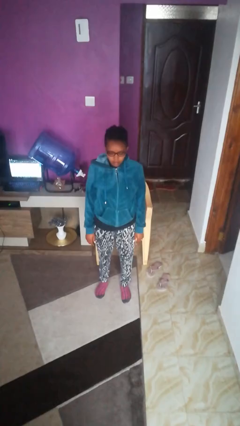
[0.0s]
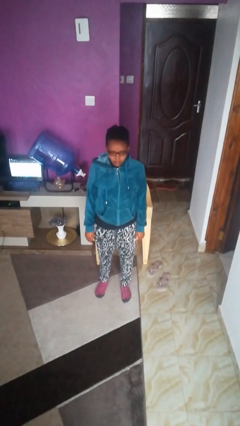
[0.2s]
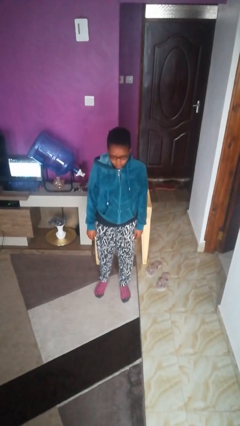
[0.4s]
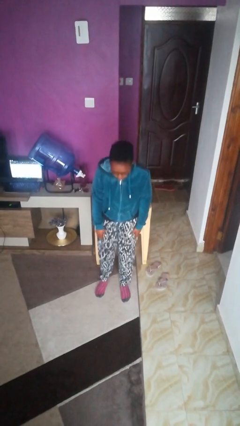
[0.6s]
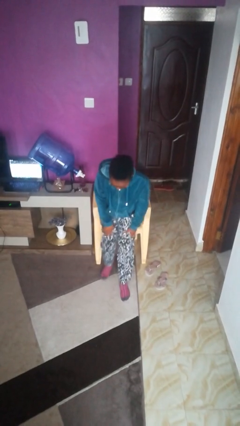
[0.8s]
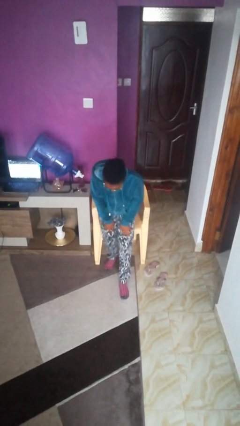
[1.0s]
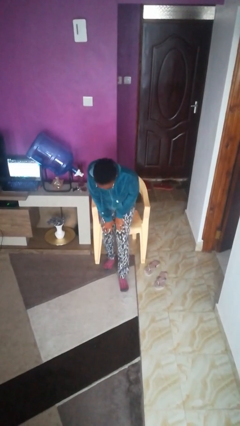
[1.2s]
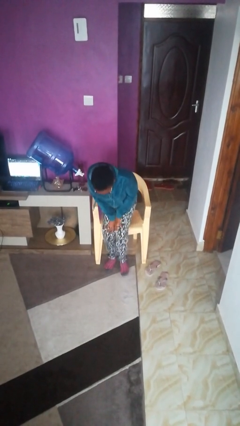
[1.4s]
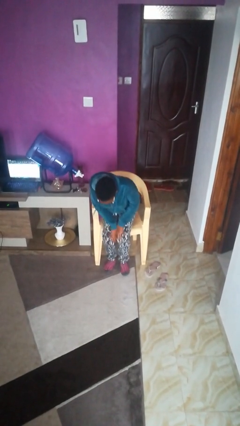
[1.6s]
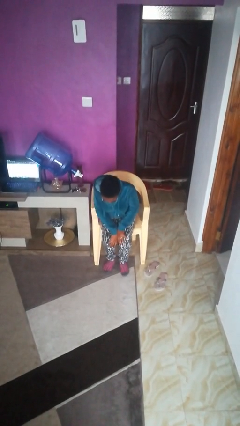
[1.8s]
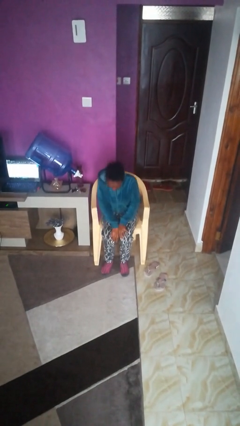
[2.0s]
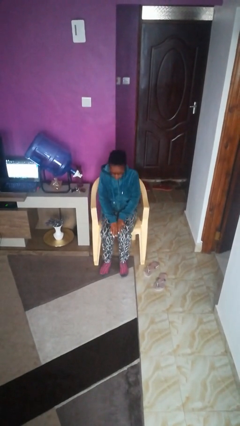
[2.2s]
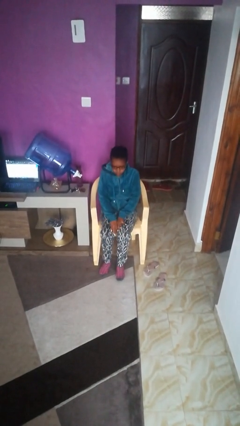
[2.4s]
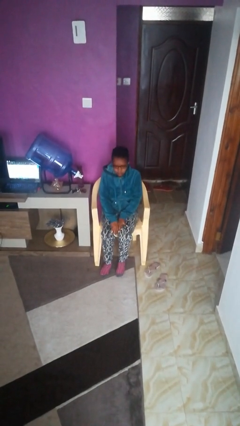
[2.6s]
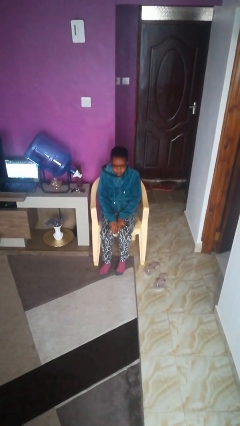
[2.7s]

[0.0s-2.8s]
person sits down

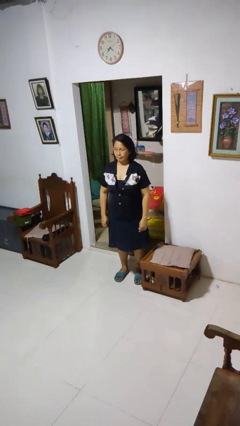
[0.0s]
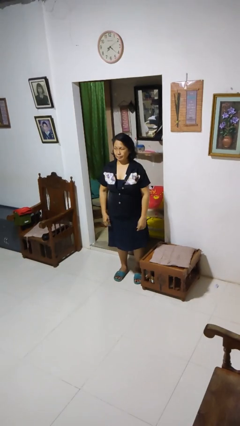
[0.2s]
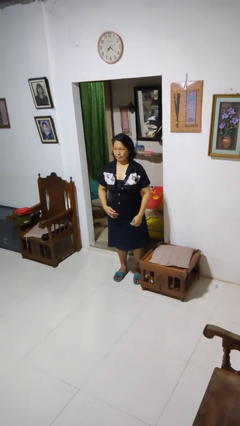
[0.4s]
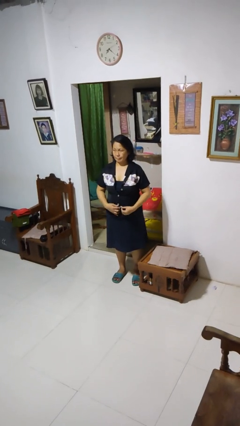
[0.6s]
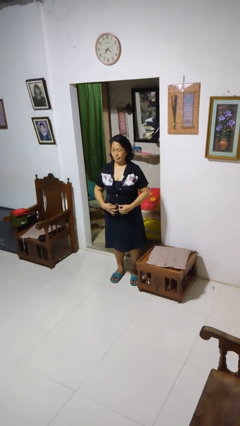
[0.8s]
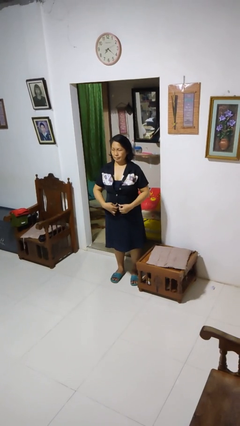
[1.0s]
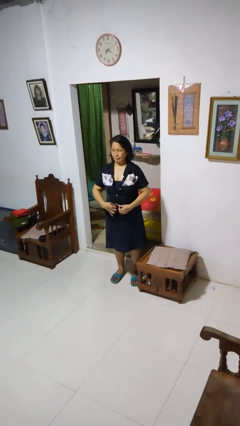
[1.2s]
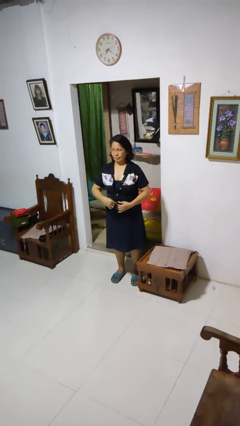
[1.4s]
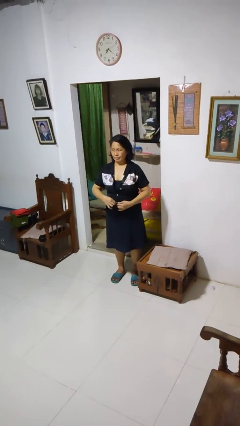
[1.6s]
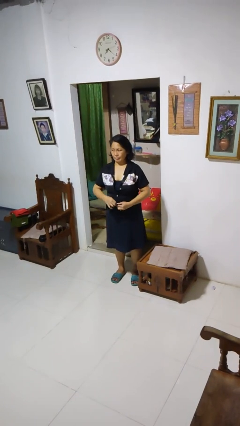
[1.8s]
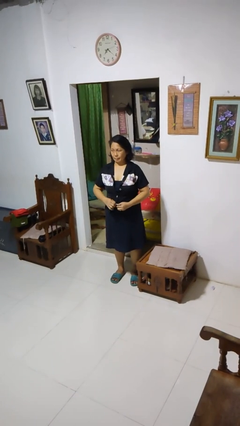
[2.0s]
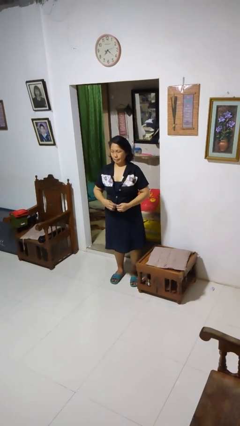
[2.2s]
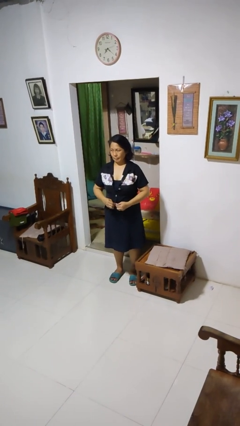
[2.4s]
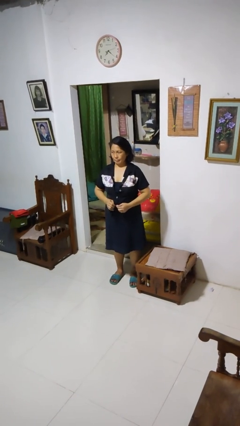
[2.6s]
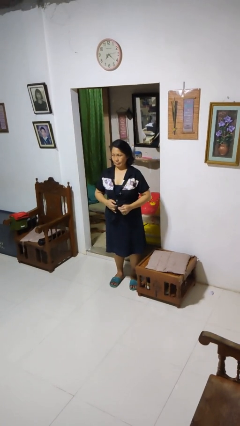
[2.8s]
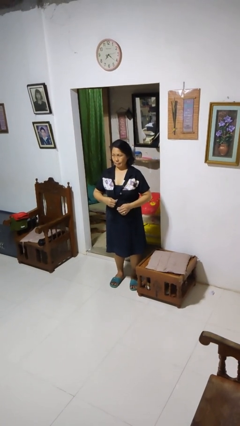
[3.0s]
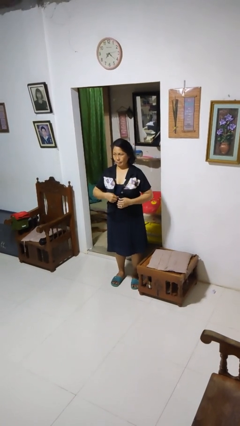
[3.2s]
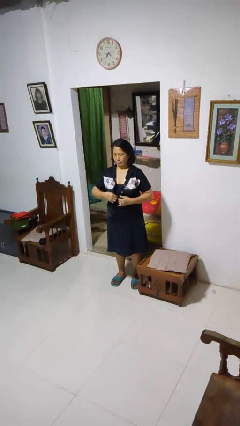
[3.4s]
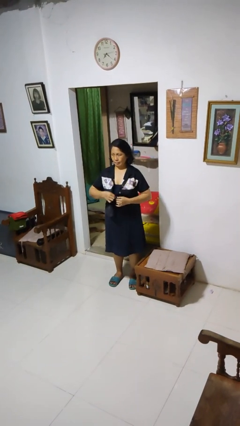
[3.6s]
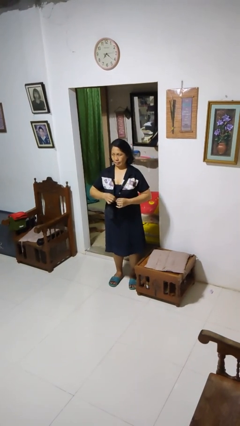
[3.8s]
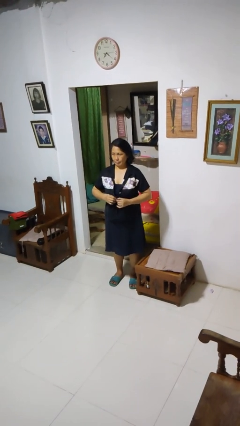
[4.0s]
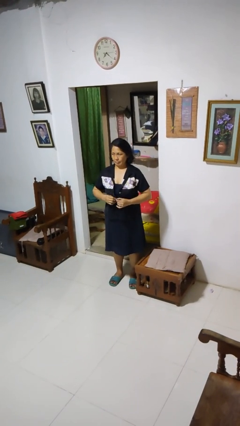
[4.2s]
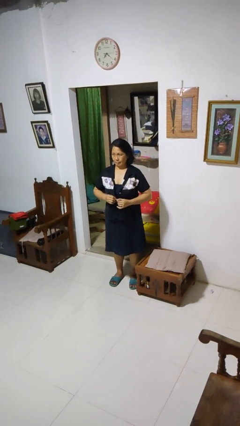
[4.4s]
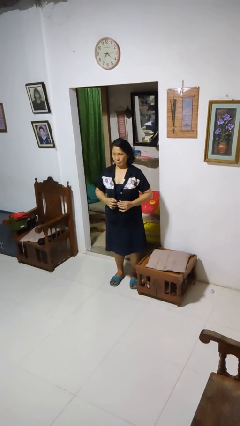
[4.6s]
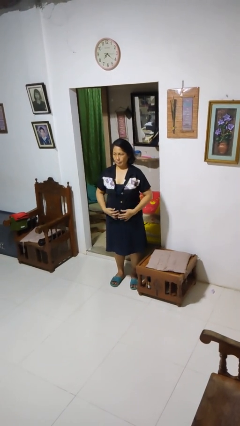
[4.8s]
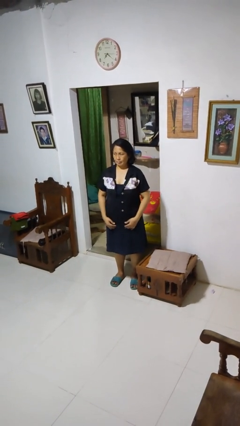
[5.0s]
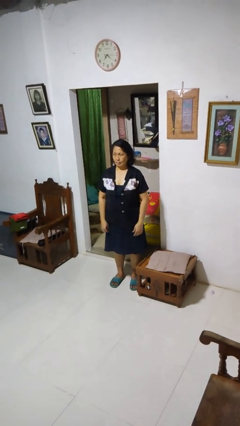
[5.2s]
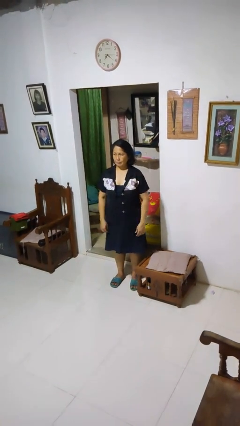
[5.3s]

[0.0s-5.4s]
person unbuttons shirt

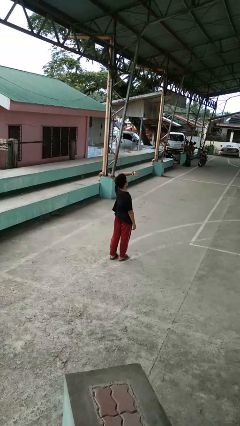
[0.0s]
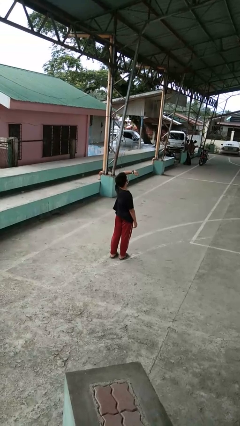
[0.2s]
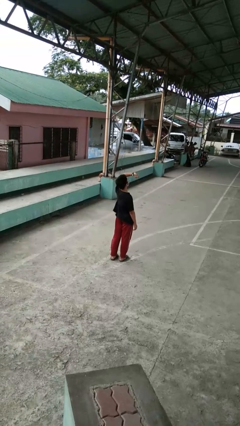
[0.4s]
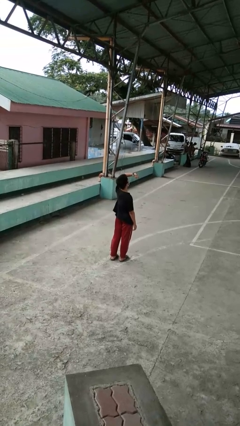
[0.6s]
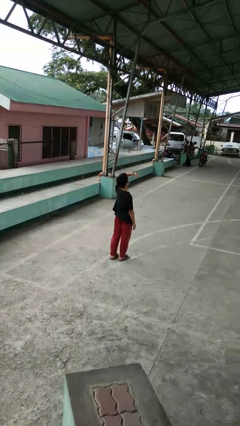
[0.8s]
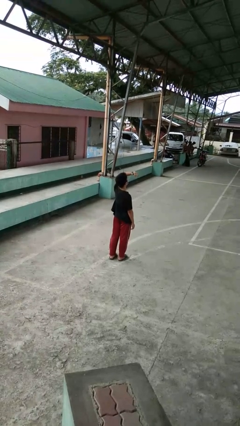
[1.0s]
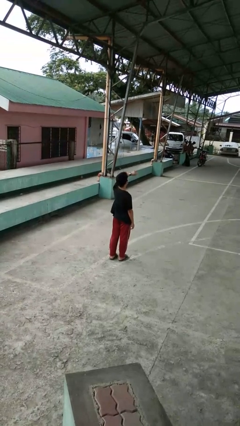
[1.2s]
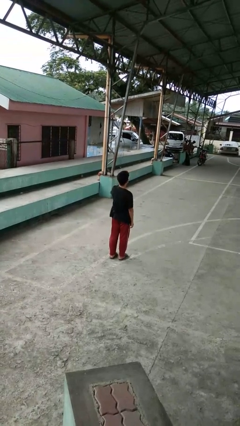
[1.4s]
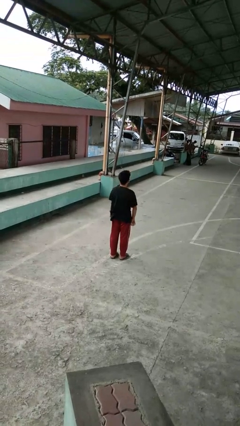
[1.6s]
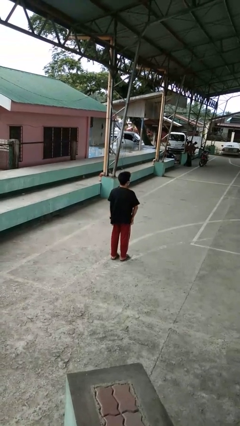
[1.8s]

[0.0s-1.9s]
person looks at wristwatch

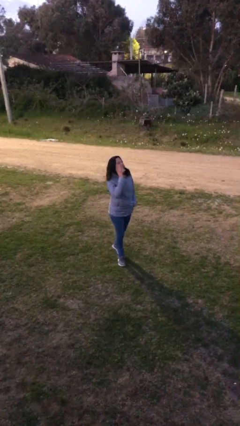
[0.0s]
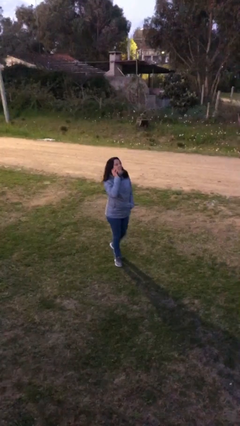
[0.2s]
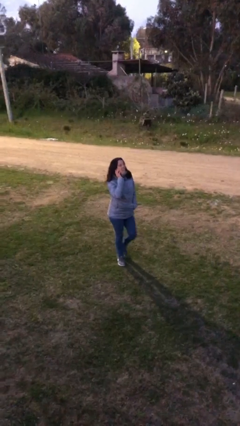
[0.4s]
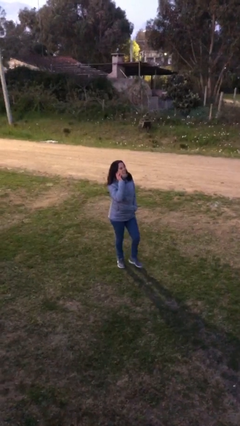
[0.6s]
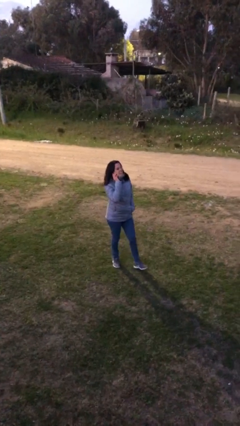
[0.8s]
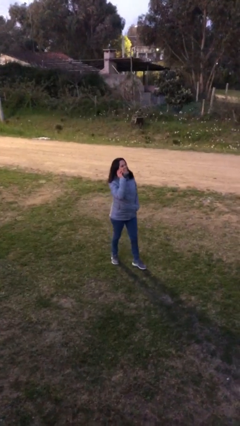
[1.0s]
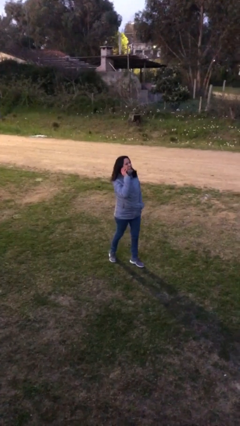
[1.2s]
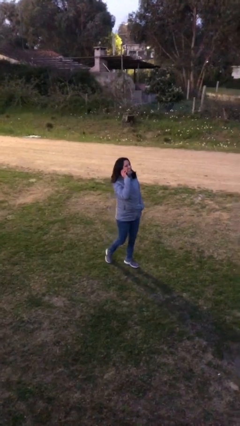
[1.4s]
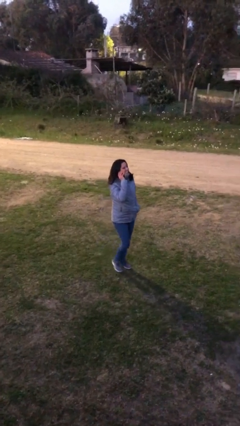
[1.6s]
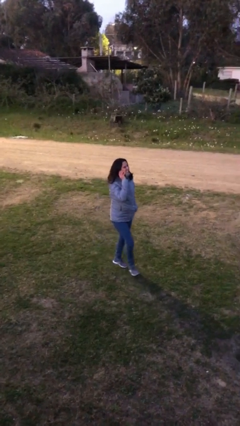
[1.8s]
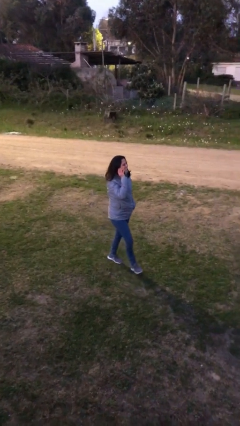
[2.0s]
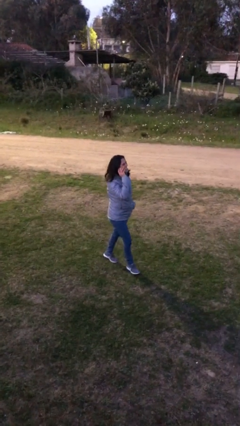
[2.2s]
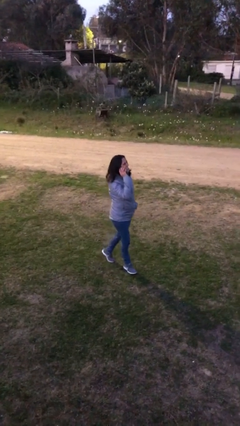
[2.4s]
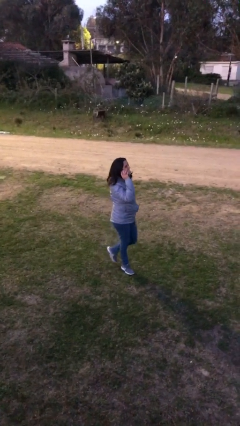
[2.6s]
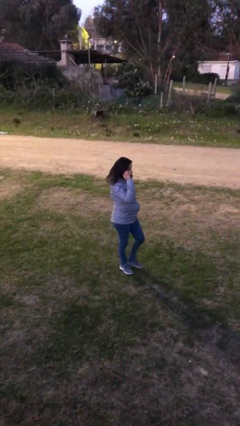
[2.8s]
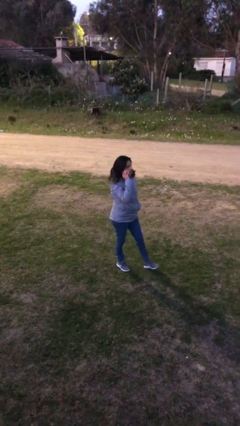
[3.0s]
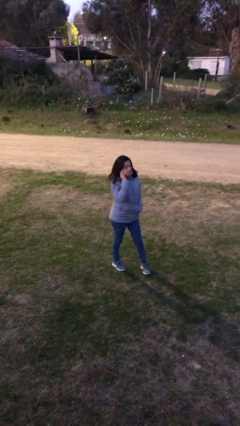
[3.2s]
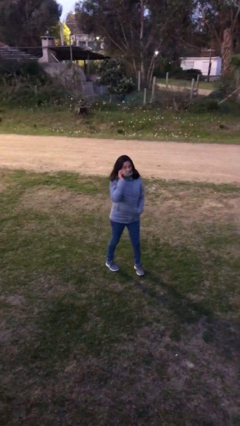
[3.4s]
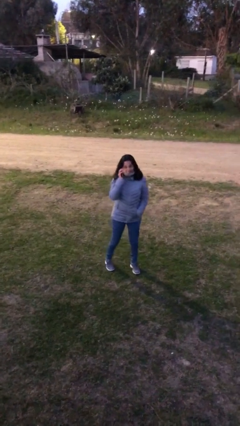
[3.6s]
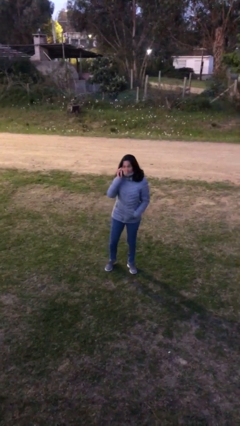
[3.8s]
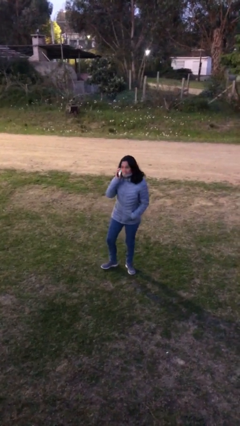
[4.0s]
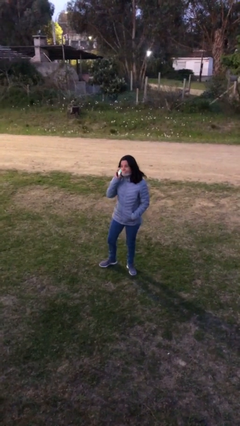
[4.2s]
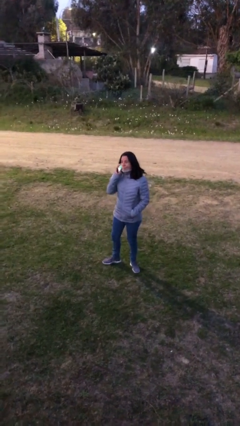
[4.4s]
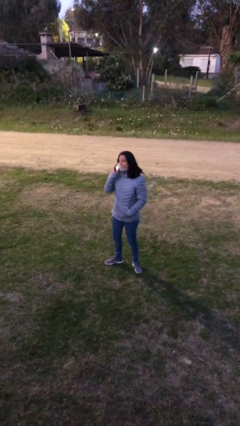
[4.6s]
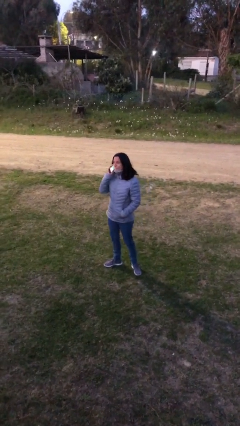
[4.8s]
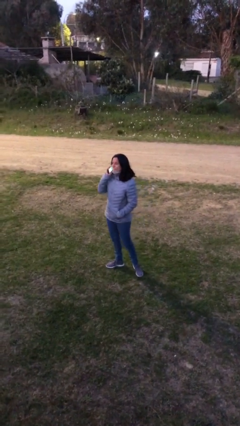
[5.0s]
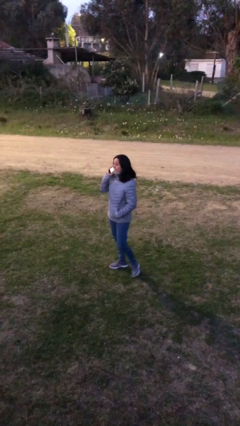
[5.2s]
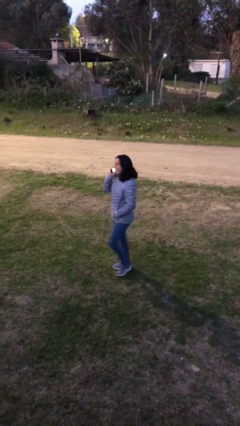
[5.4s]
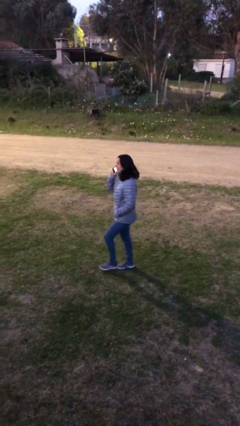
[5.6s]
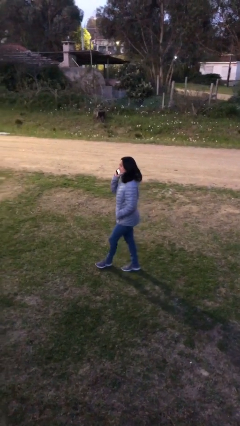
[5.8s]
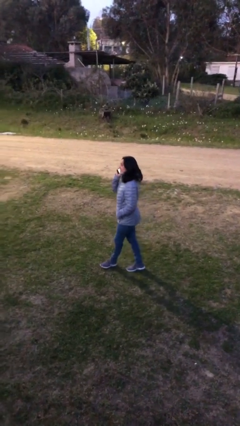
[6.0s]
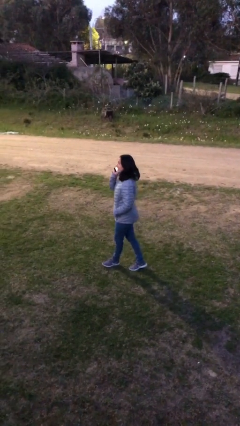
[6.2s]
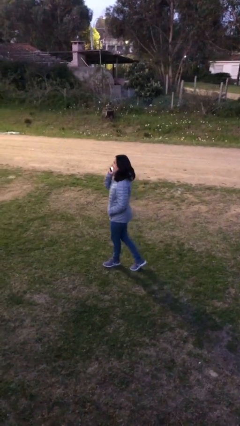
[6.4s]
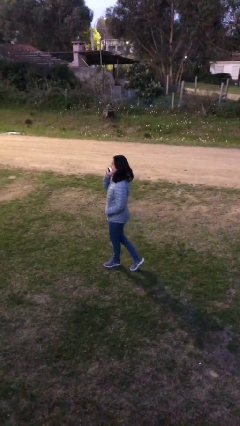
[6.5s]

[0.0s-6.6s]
person talks on phone

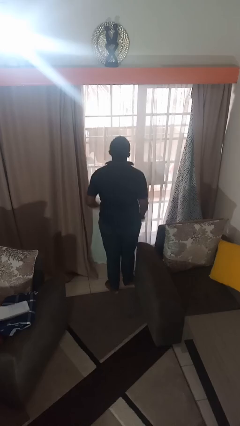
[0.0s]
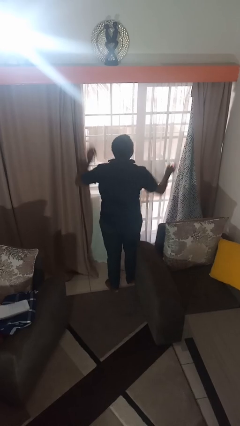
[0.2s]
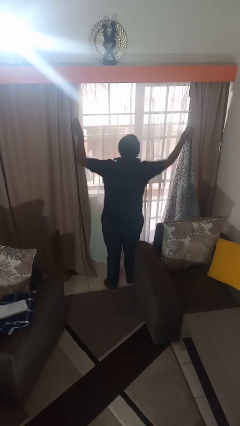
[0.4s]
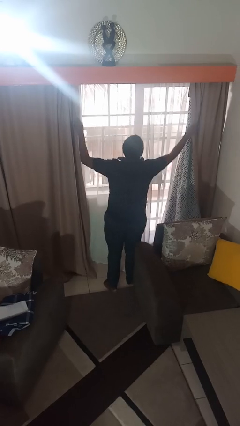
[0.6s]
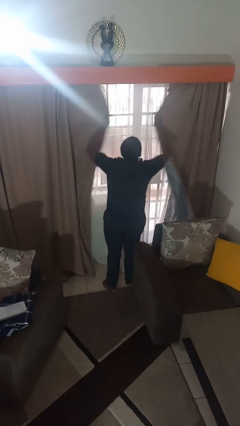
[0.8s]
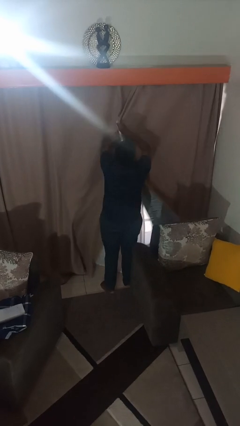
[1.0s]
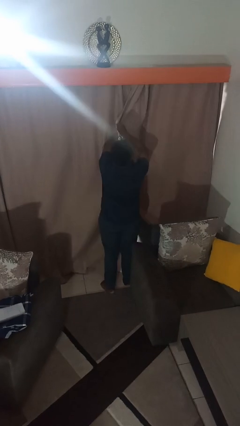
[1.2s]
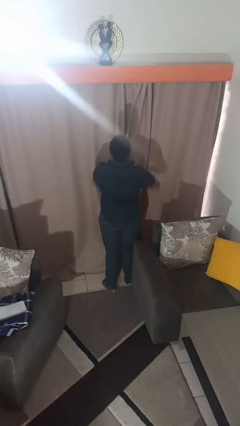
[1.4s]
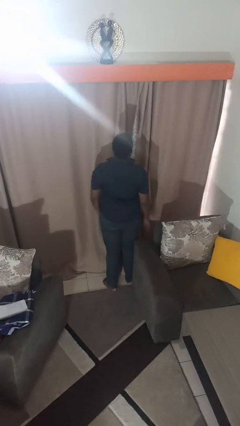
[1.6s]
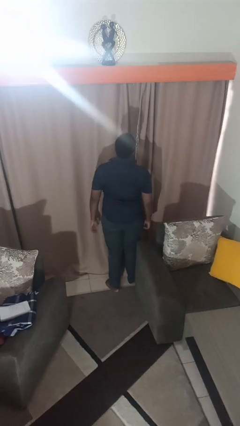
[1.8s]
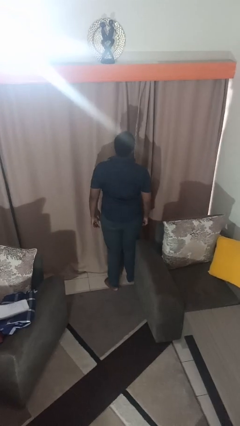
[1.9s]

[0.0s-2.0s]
person closes curtains
